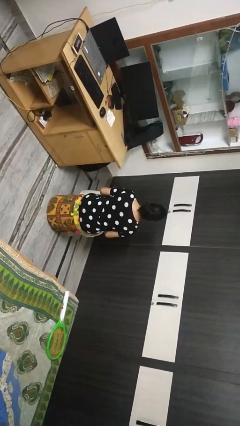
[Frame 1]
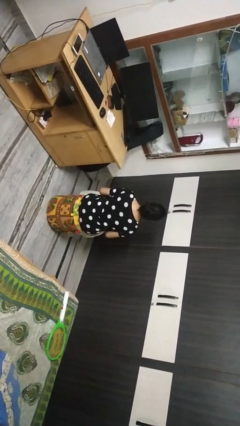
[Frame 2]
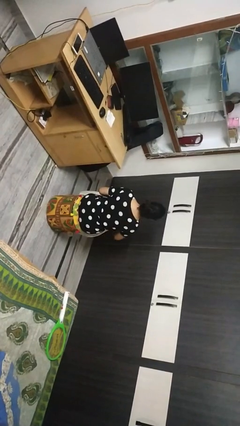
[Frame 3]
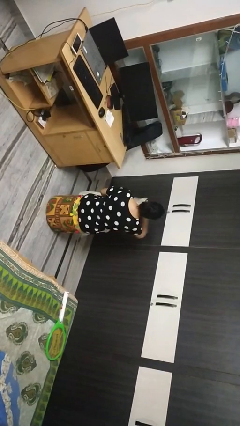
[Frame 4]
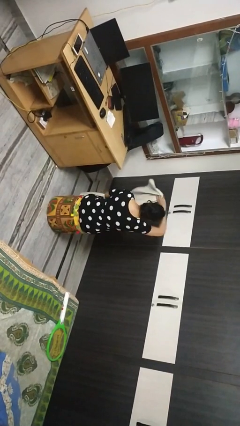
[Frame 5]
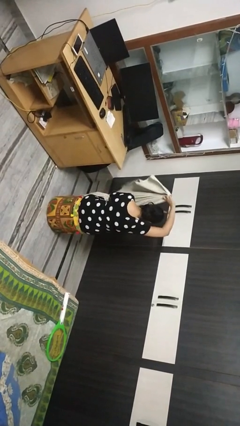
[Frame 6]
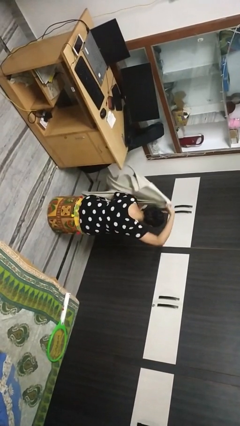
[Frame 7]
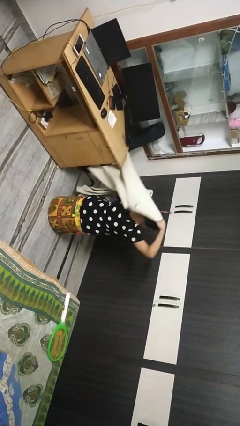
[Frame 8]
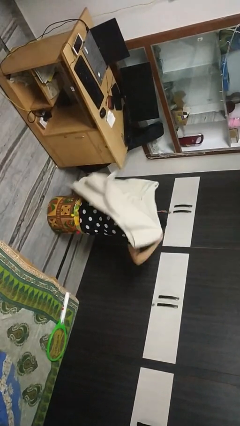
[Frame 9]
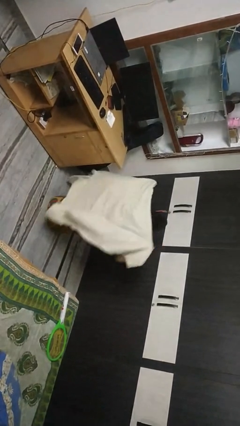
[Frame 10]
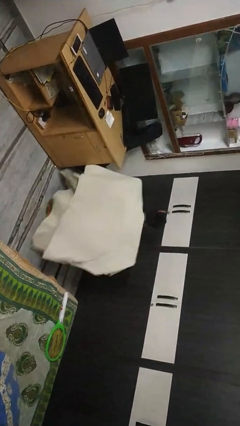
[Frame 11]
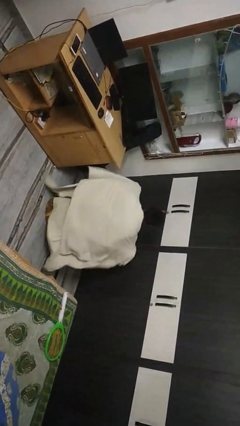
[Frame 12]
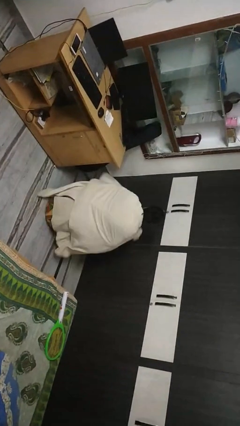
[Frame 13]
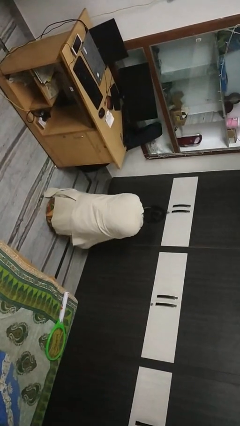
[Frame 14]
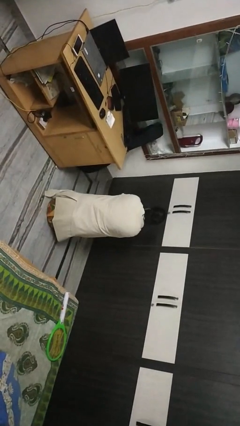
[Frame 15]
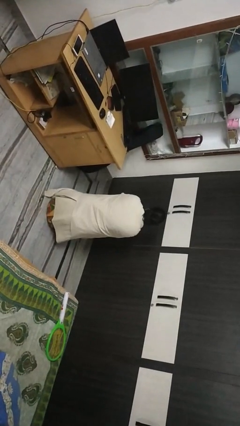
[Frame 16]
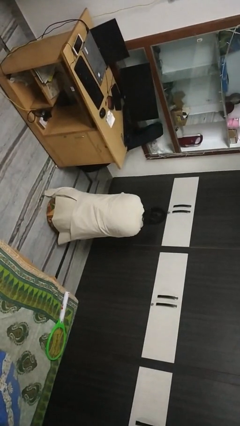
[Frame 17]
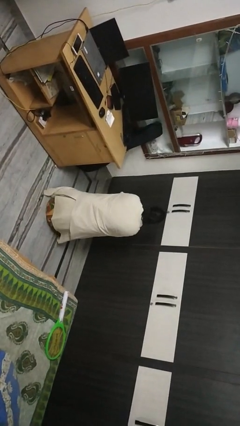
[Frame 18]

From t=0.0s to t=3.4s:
person covers with blanket

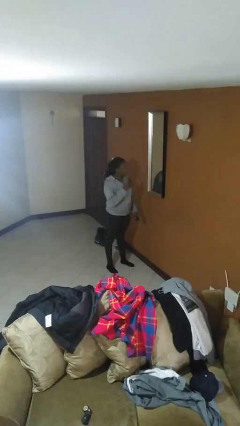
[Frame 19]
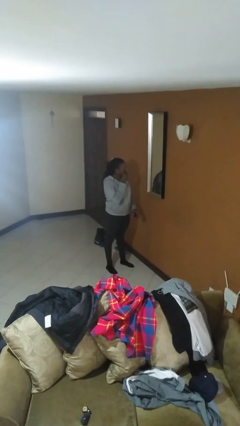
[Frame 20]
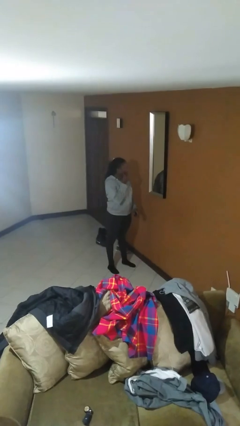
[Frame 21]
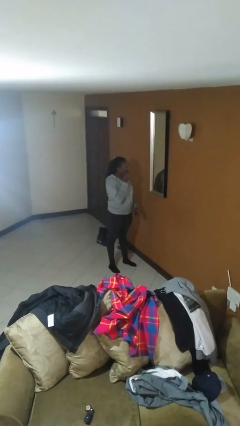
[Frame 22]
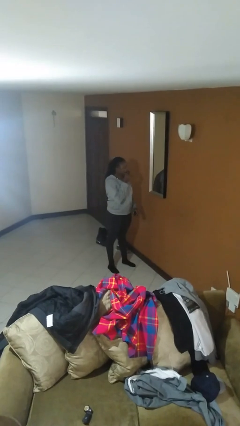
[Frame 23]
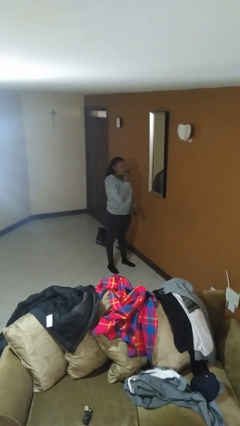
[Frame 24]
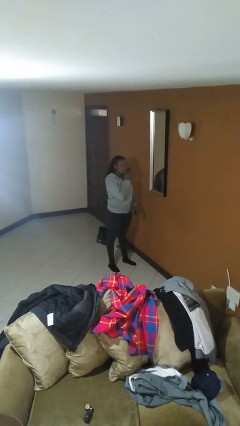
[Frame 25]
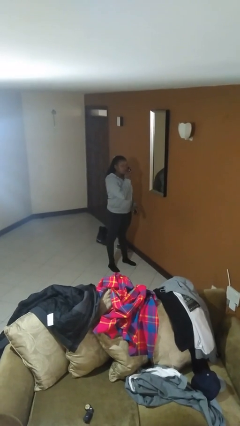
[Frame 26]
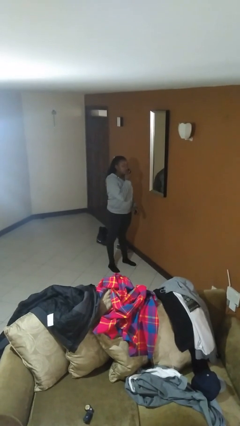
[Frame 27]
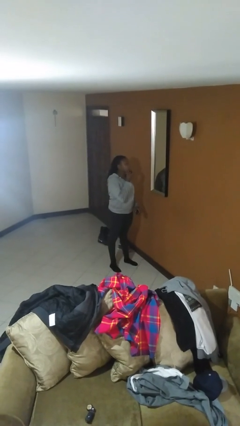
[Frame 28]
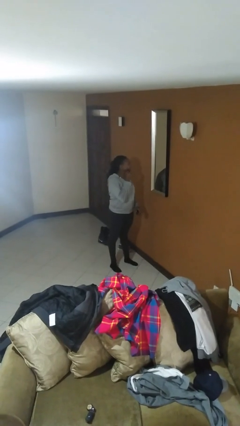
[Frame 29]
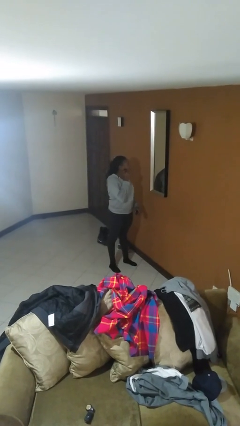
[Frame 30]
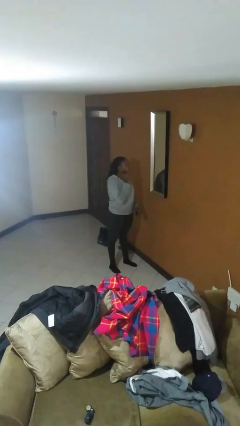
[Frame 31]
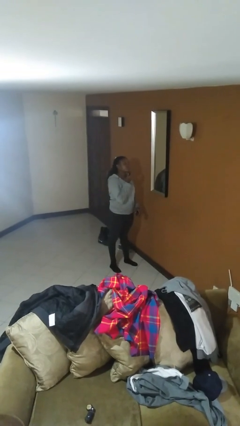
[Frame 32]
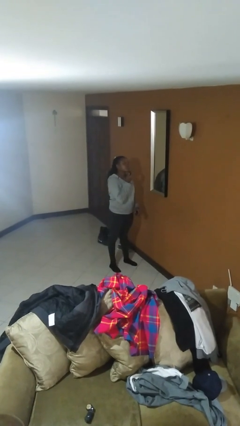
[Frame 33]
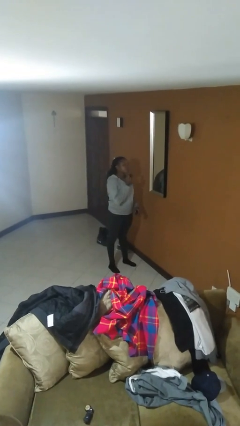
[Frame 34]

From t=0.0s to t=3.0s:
person applies foundation makeup

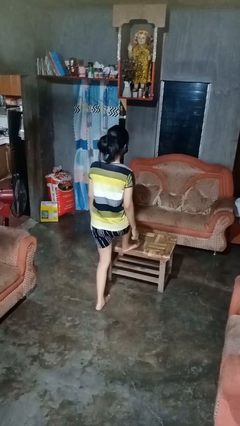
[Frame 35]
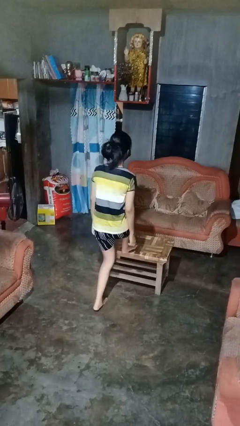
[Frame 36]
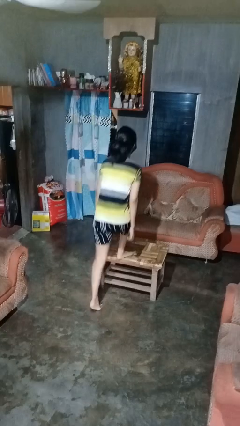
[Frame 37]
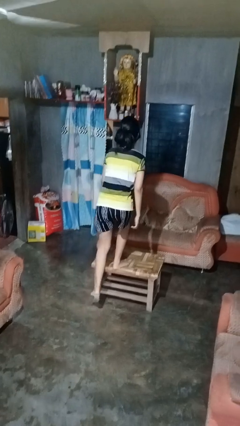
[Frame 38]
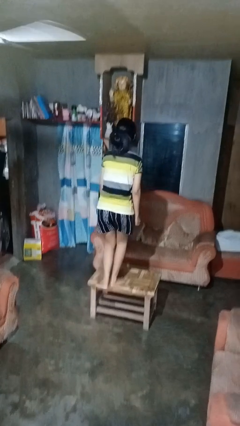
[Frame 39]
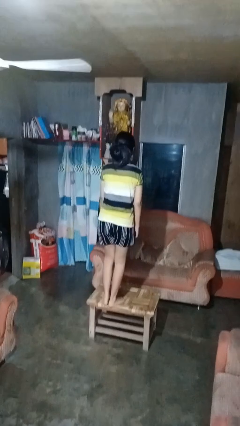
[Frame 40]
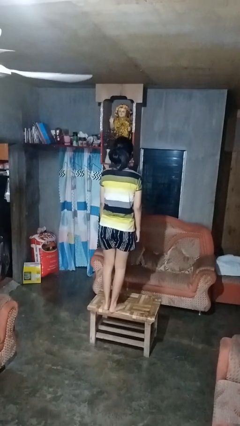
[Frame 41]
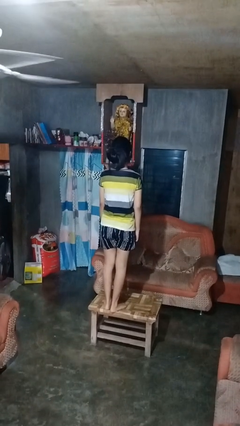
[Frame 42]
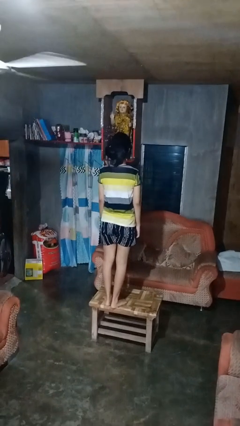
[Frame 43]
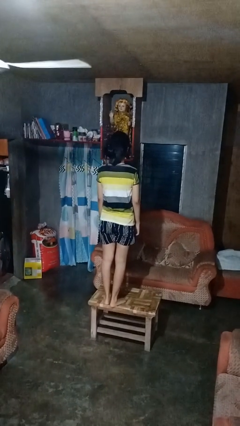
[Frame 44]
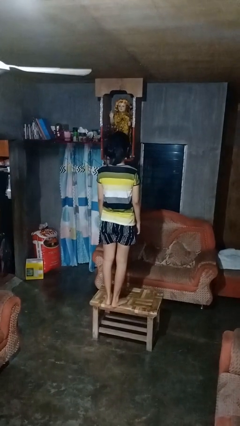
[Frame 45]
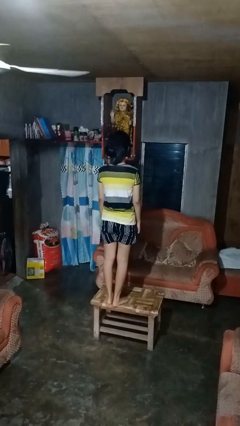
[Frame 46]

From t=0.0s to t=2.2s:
person climbs on table

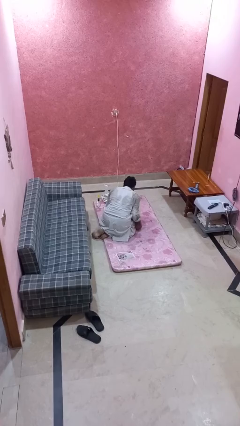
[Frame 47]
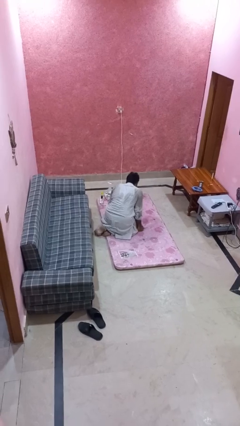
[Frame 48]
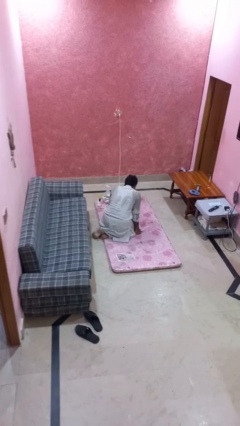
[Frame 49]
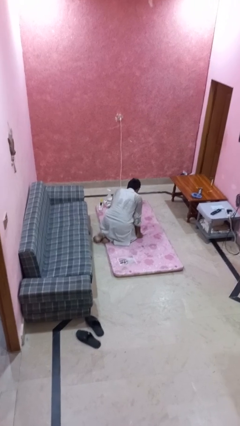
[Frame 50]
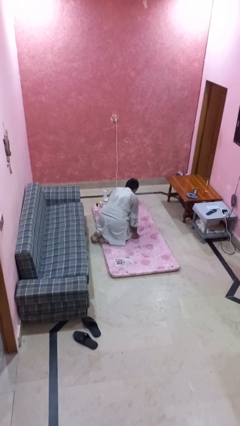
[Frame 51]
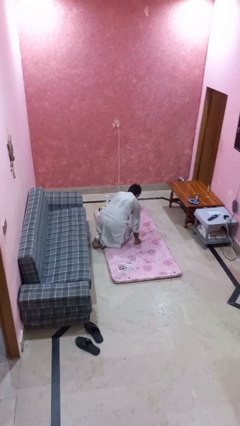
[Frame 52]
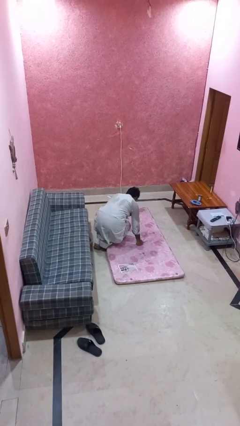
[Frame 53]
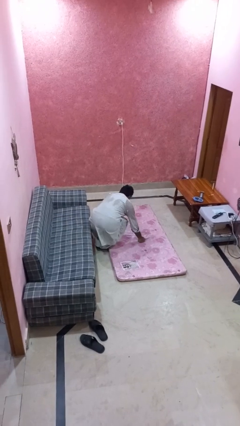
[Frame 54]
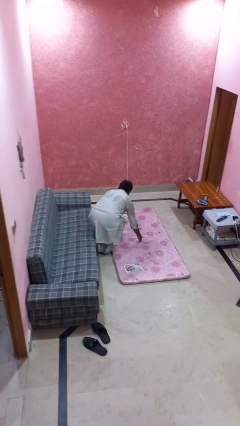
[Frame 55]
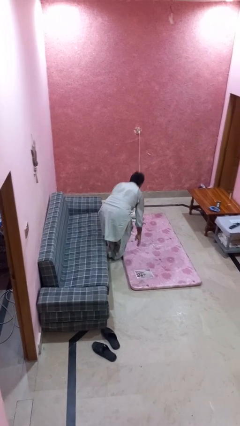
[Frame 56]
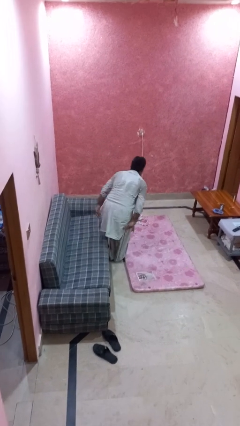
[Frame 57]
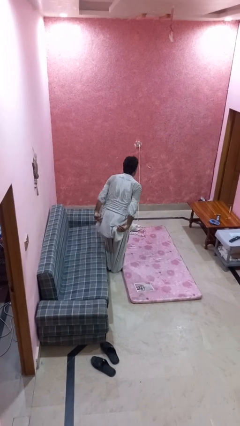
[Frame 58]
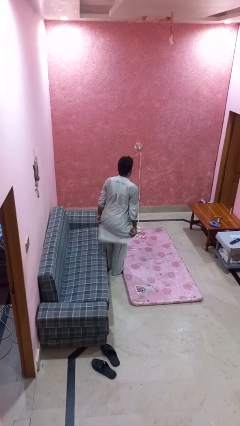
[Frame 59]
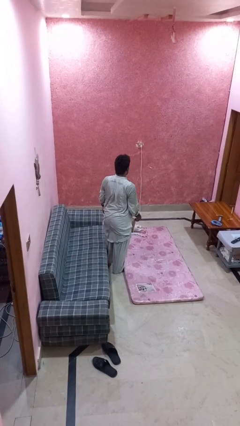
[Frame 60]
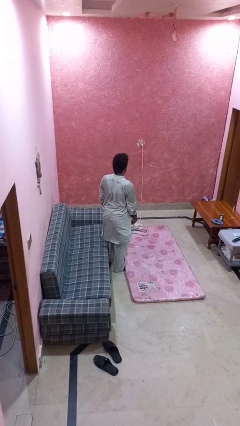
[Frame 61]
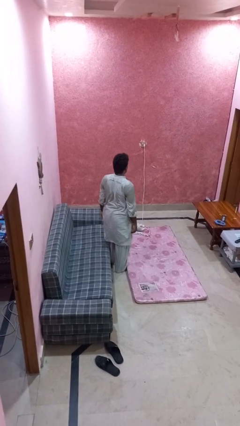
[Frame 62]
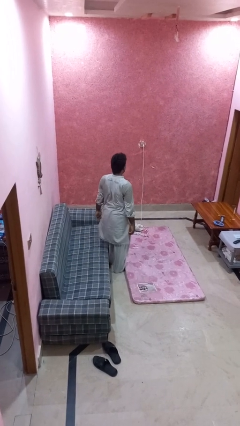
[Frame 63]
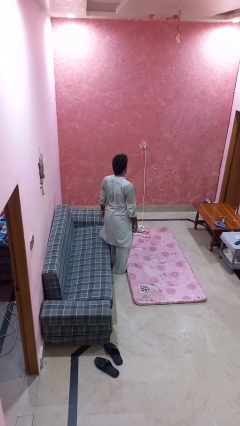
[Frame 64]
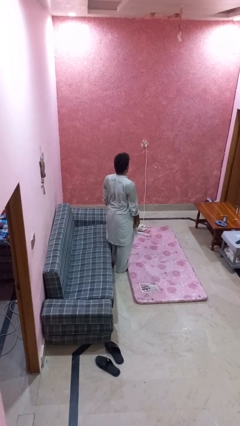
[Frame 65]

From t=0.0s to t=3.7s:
person stands up from floor

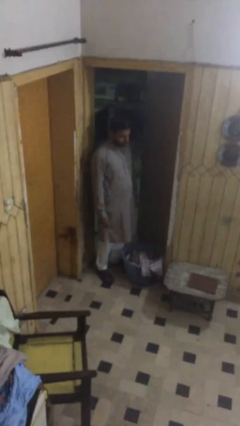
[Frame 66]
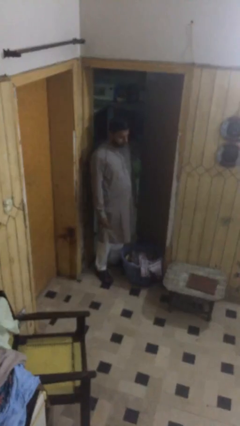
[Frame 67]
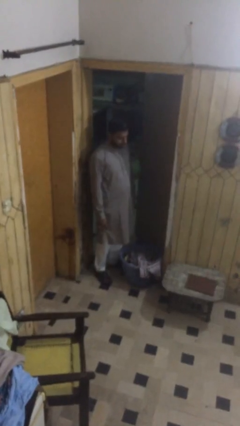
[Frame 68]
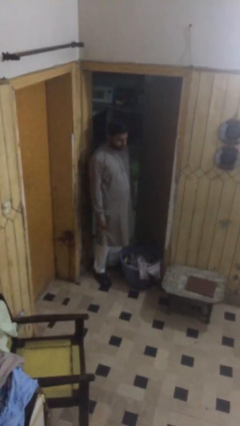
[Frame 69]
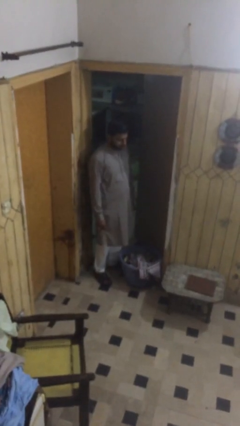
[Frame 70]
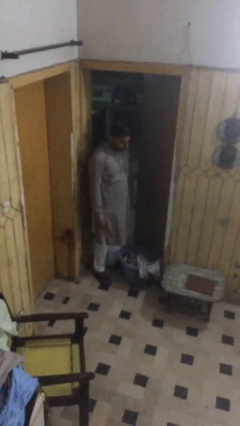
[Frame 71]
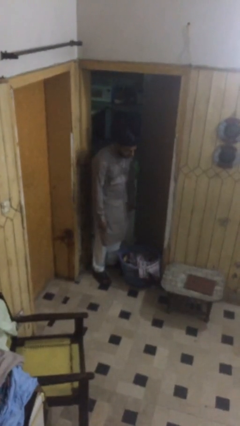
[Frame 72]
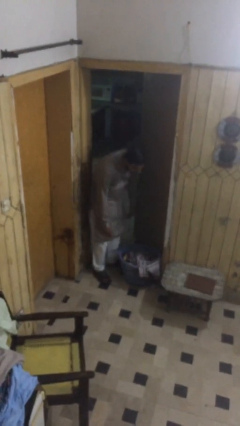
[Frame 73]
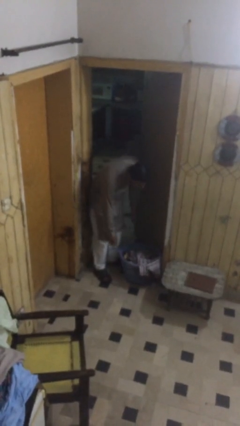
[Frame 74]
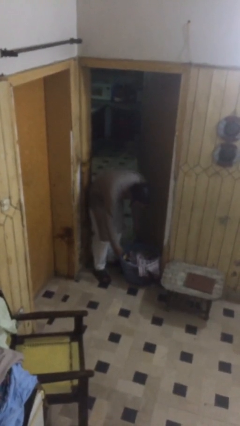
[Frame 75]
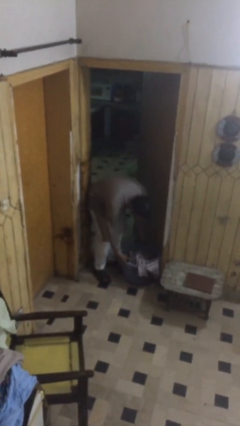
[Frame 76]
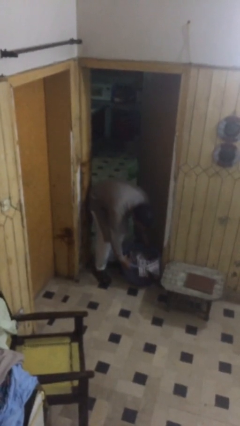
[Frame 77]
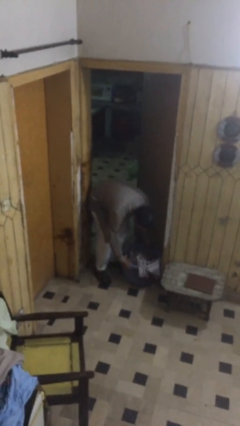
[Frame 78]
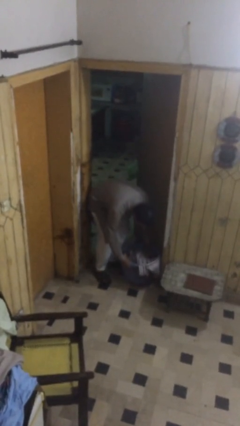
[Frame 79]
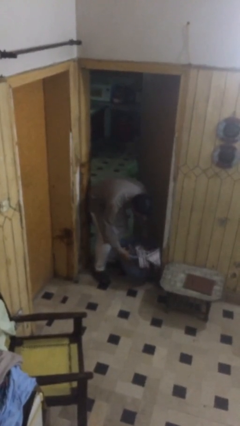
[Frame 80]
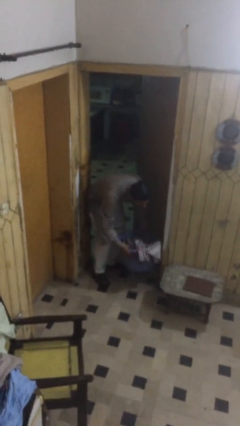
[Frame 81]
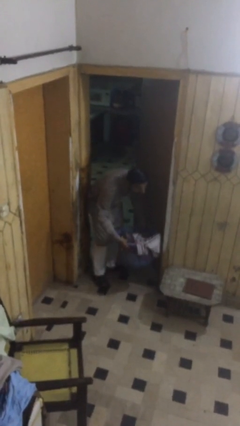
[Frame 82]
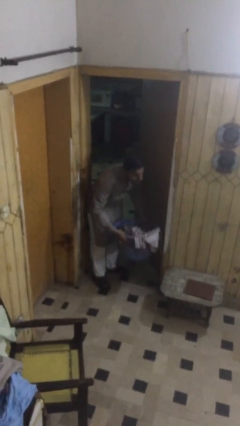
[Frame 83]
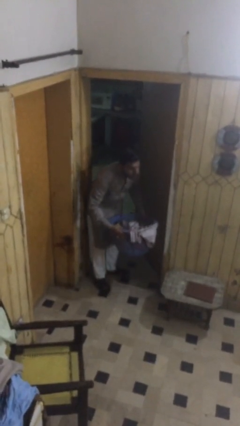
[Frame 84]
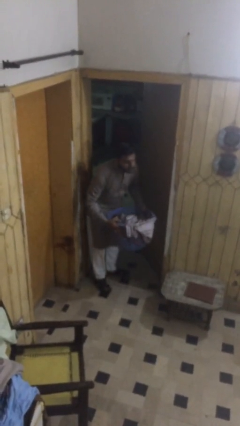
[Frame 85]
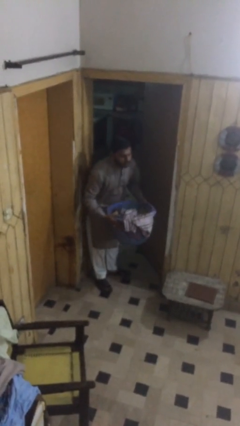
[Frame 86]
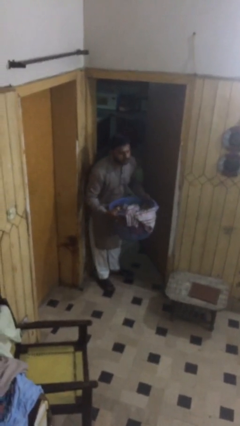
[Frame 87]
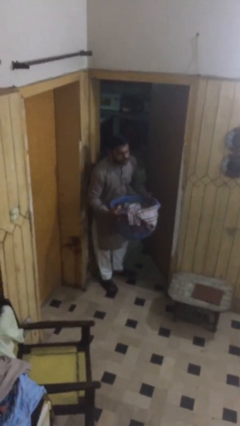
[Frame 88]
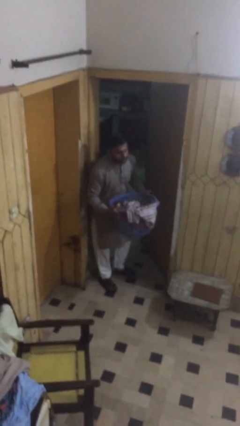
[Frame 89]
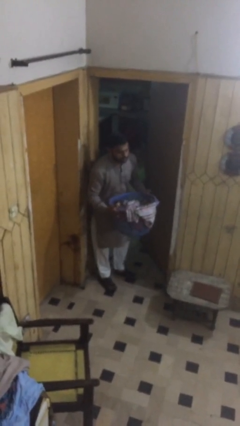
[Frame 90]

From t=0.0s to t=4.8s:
person picks up object from floor

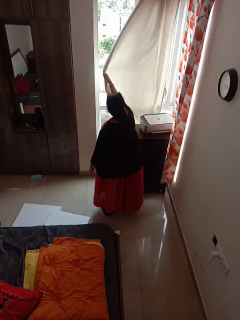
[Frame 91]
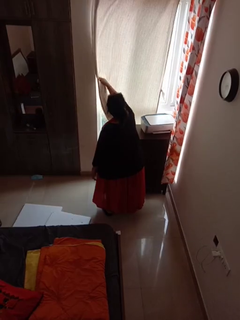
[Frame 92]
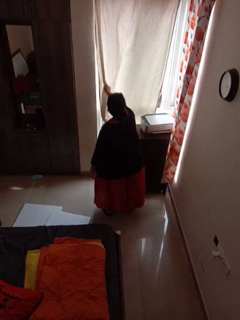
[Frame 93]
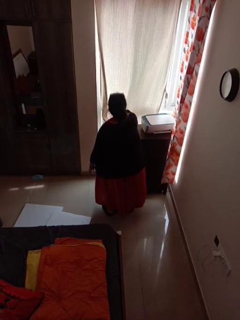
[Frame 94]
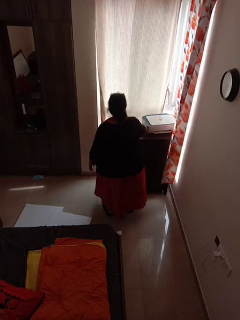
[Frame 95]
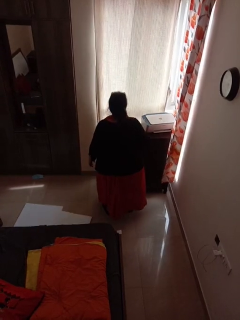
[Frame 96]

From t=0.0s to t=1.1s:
person closes curtains
